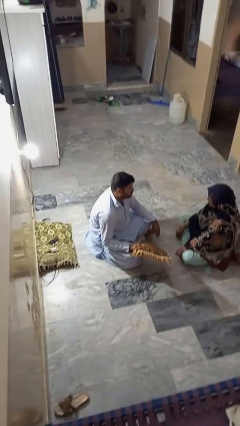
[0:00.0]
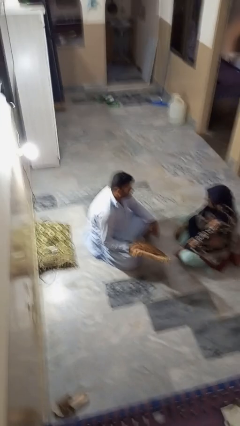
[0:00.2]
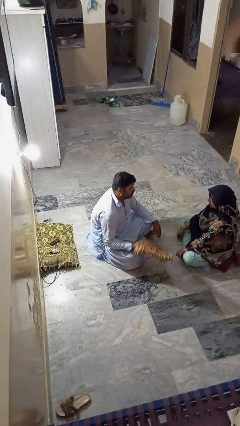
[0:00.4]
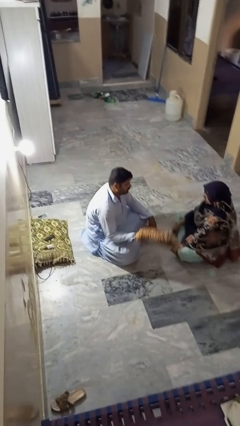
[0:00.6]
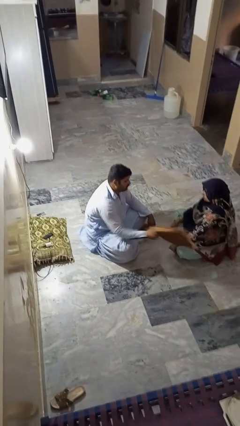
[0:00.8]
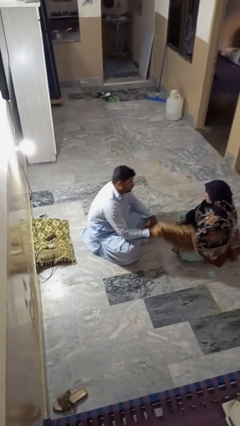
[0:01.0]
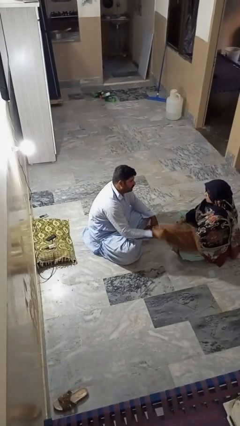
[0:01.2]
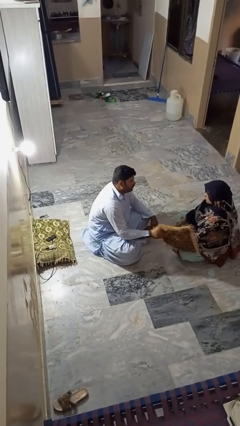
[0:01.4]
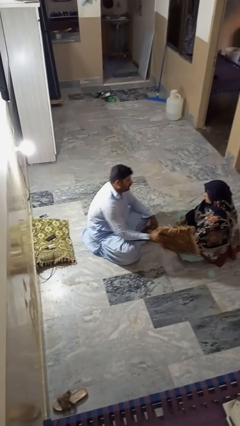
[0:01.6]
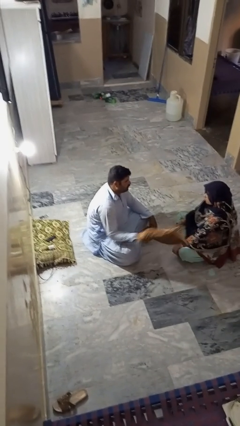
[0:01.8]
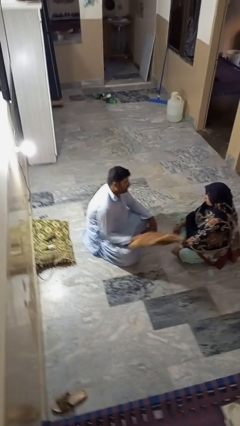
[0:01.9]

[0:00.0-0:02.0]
person hits person with pillow

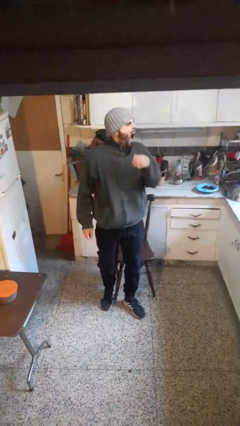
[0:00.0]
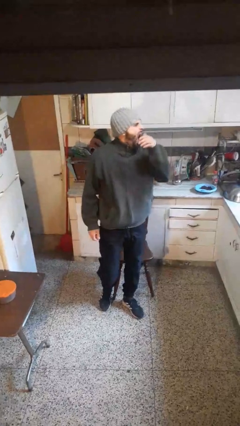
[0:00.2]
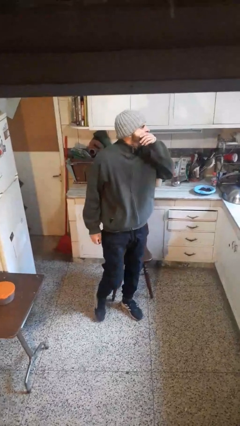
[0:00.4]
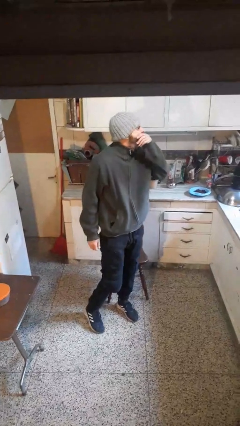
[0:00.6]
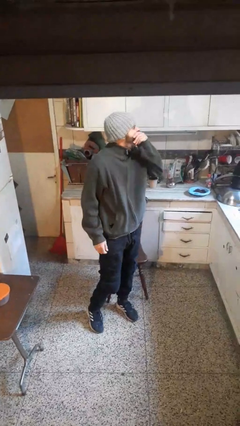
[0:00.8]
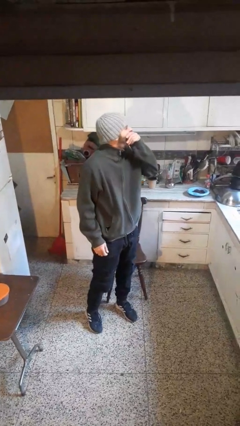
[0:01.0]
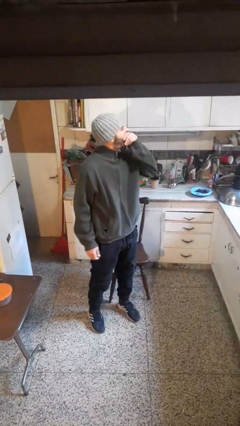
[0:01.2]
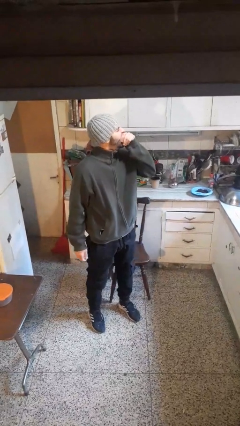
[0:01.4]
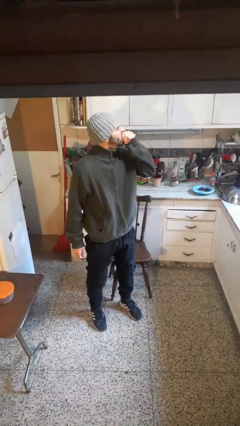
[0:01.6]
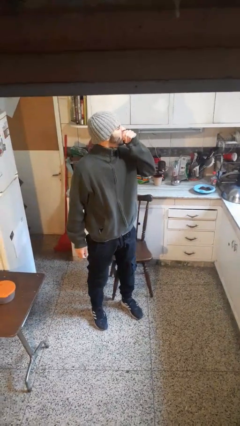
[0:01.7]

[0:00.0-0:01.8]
person yawns

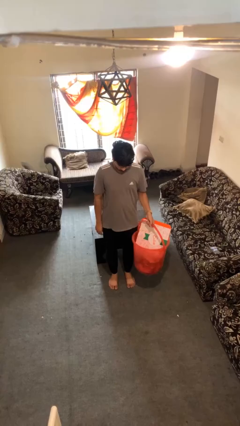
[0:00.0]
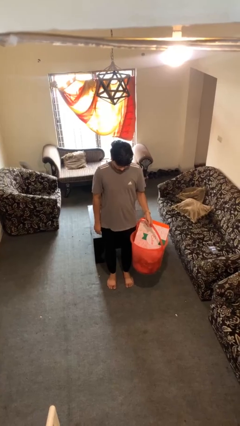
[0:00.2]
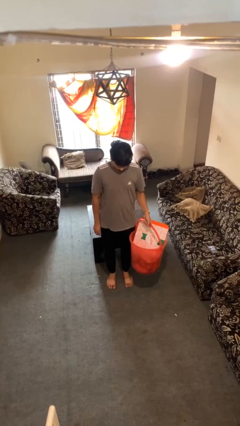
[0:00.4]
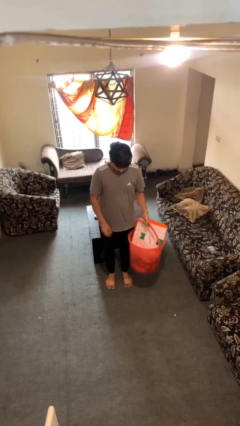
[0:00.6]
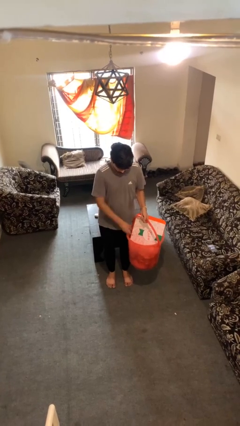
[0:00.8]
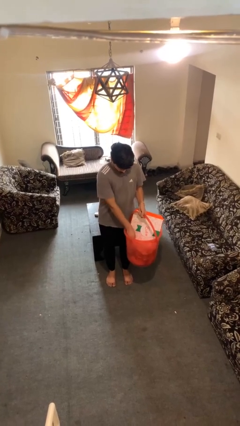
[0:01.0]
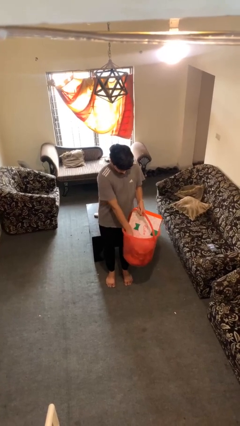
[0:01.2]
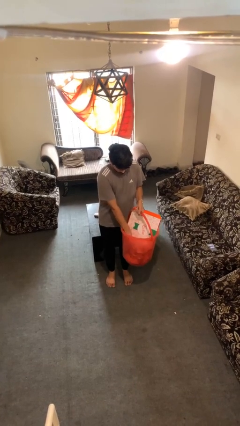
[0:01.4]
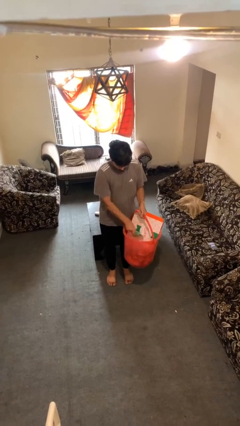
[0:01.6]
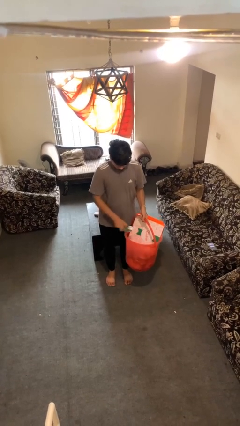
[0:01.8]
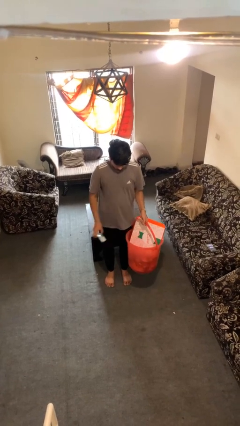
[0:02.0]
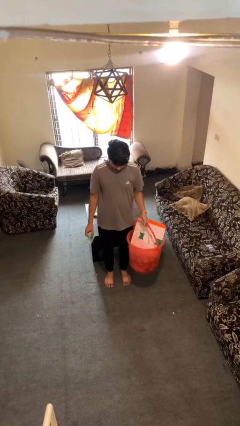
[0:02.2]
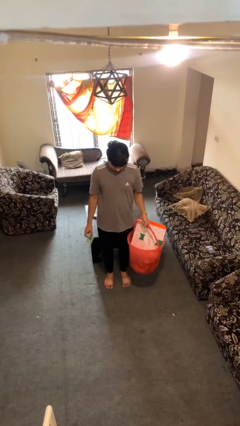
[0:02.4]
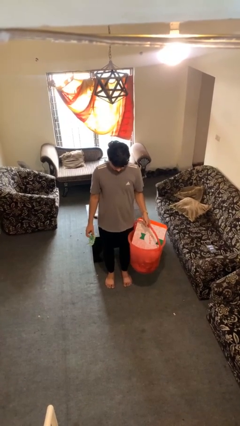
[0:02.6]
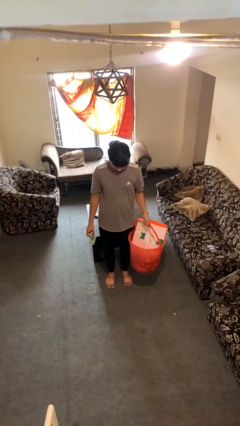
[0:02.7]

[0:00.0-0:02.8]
person takes object from basket

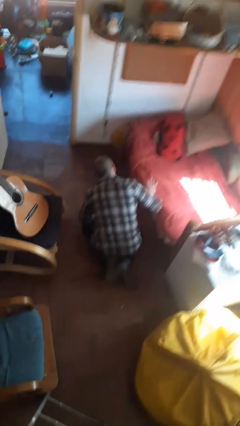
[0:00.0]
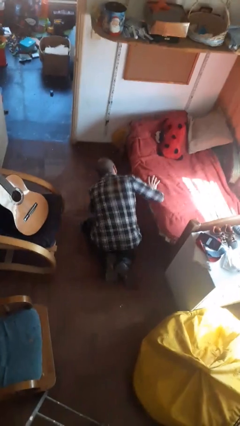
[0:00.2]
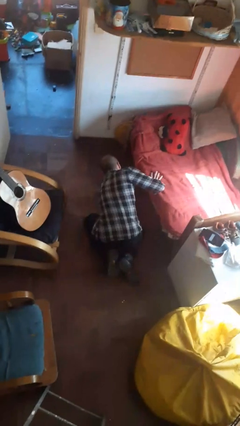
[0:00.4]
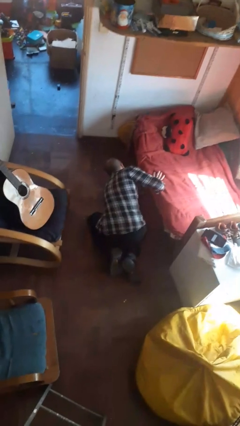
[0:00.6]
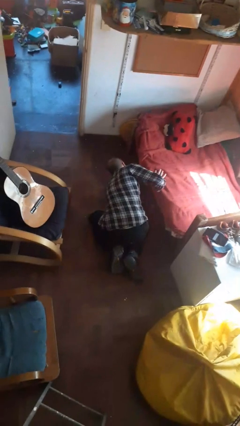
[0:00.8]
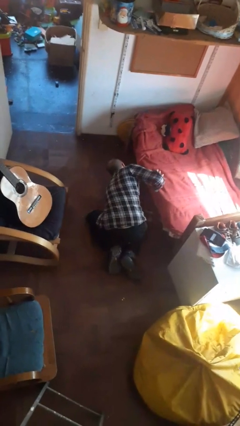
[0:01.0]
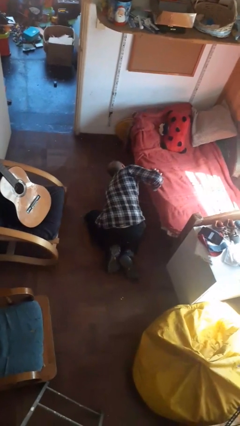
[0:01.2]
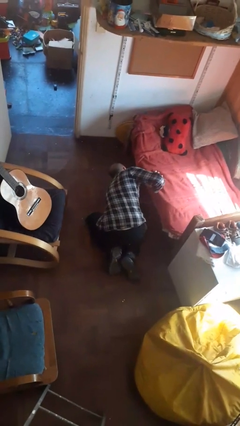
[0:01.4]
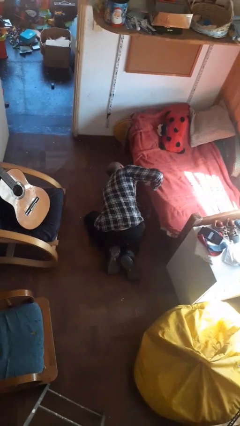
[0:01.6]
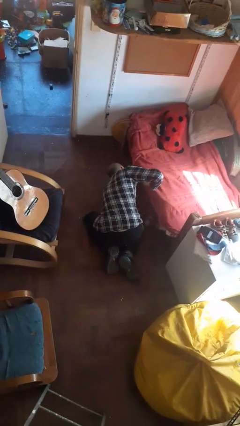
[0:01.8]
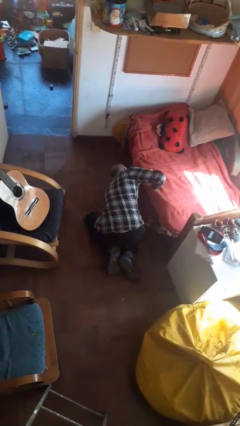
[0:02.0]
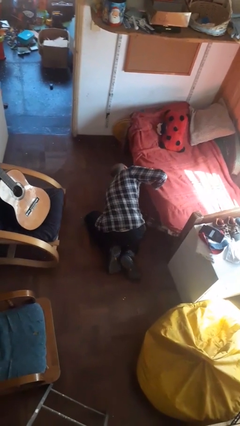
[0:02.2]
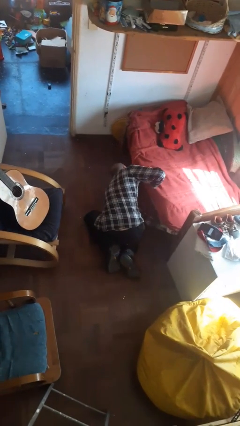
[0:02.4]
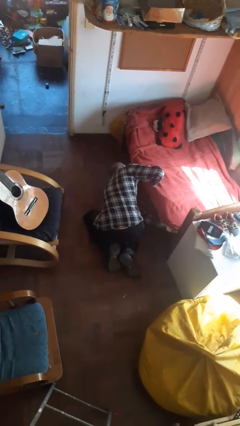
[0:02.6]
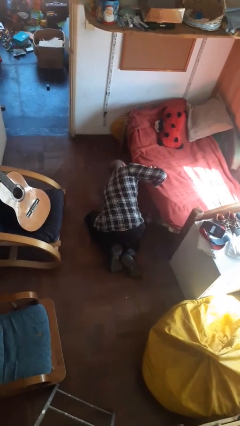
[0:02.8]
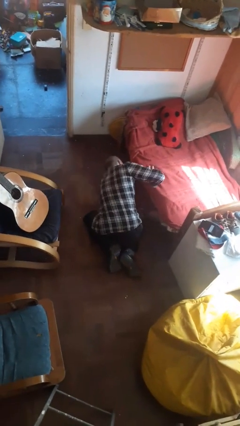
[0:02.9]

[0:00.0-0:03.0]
person searches under bed

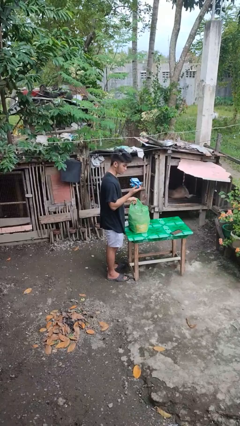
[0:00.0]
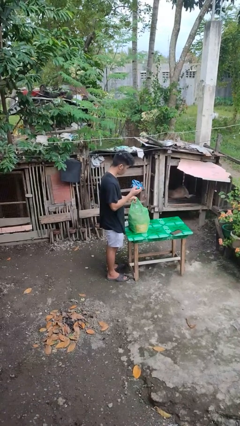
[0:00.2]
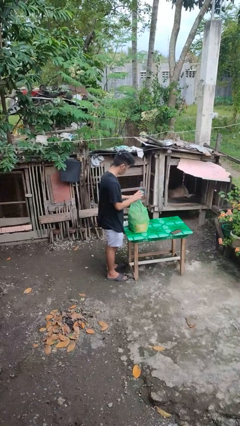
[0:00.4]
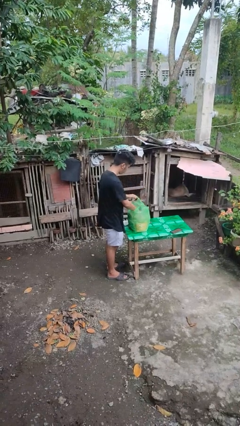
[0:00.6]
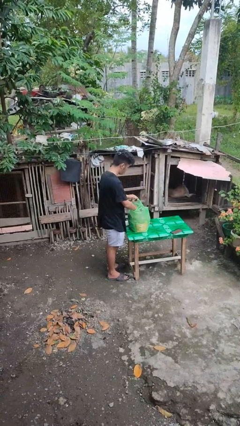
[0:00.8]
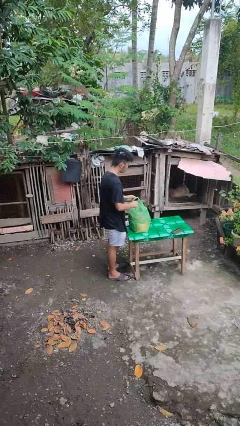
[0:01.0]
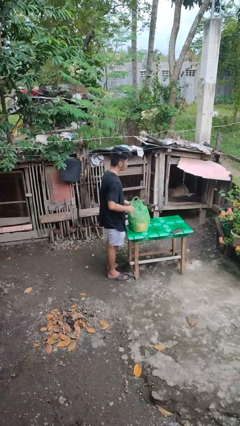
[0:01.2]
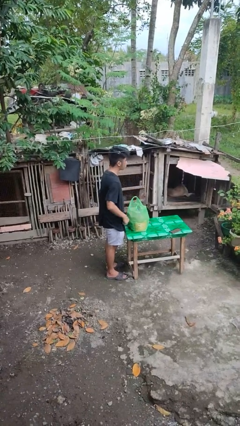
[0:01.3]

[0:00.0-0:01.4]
person puts object into bag

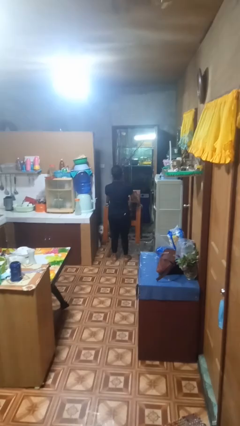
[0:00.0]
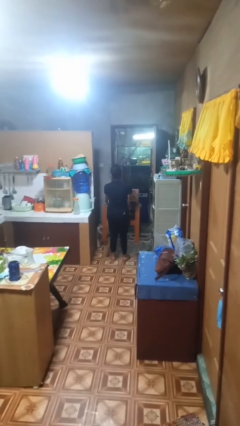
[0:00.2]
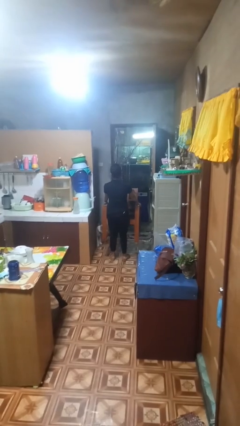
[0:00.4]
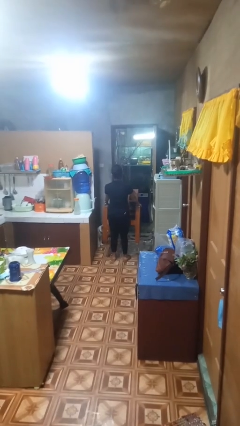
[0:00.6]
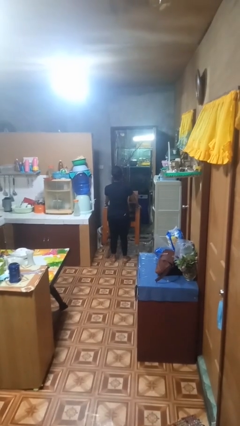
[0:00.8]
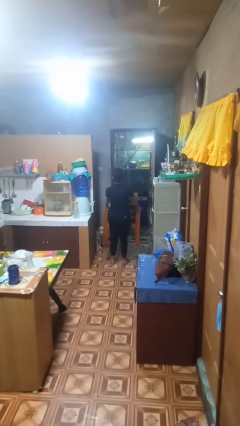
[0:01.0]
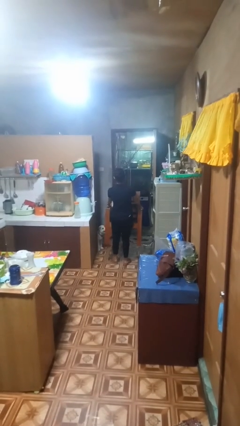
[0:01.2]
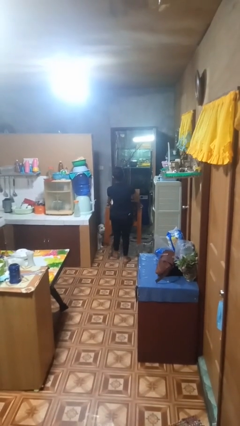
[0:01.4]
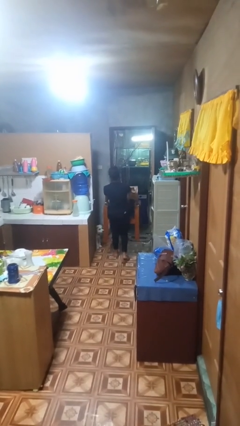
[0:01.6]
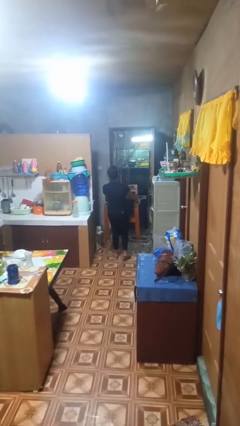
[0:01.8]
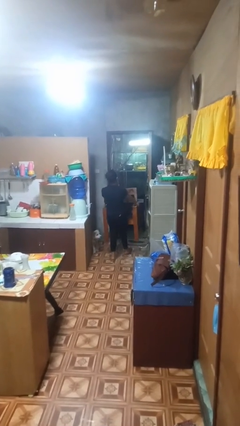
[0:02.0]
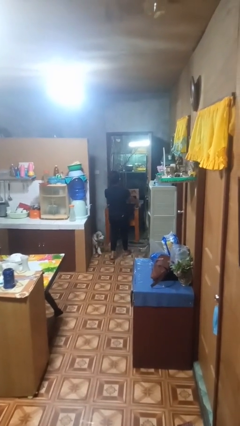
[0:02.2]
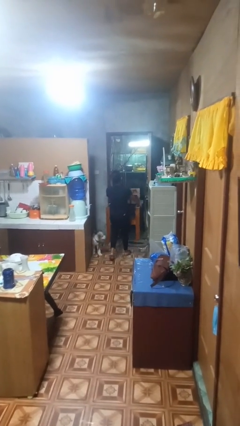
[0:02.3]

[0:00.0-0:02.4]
person carries furniture

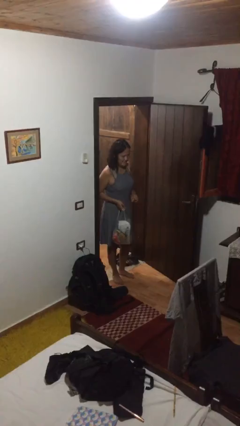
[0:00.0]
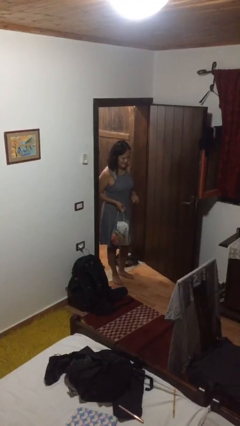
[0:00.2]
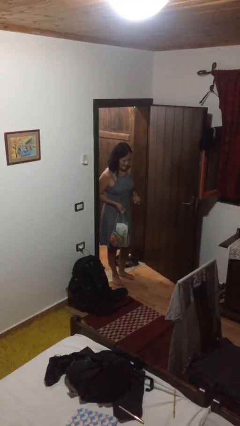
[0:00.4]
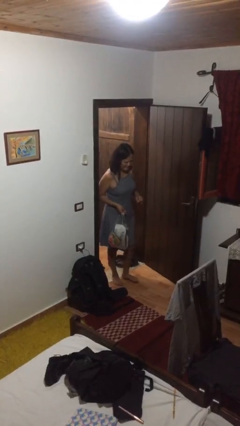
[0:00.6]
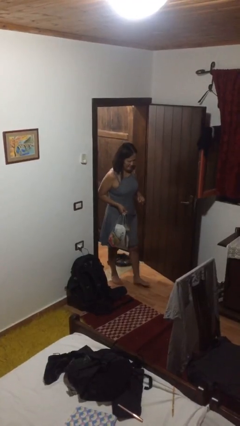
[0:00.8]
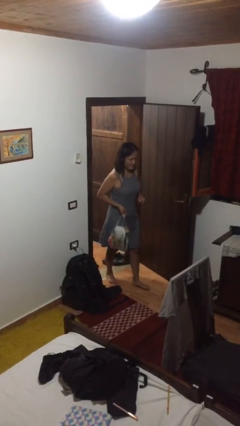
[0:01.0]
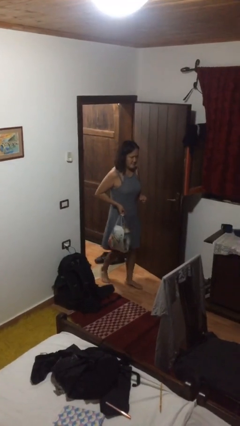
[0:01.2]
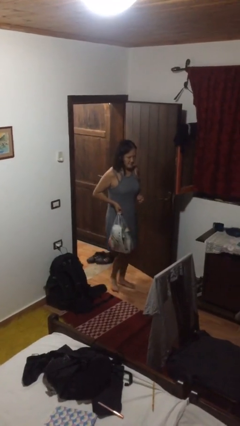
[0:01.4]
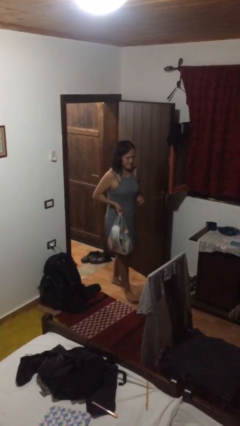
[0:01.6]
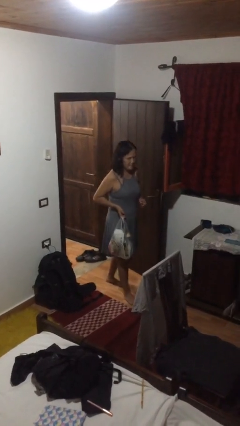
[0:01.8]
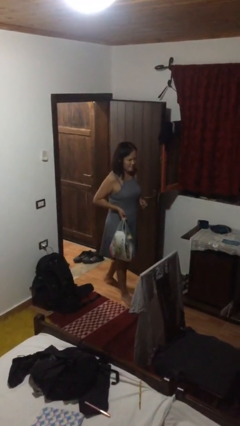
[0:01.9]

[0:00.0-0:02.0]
person carries groceries

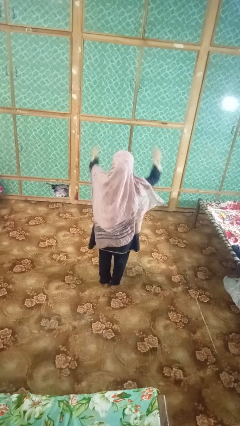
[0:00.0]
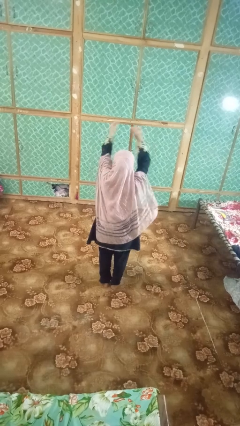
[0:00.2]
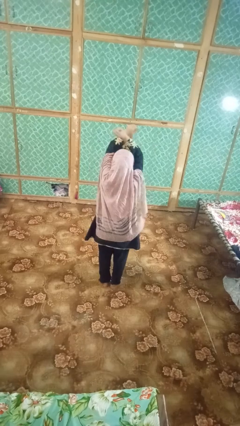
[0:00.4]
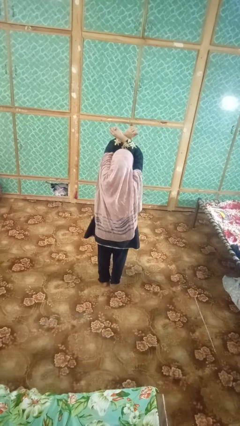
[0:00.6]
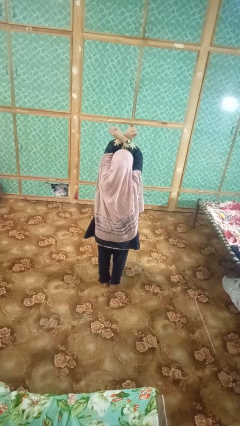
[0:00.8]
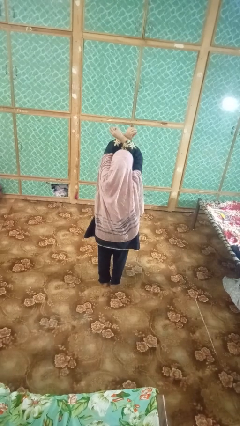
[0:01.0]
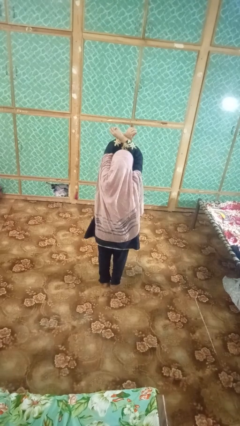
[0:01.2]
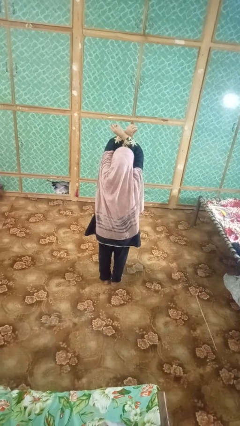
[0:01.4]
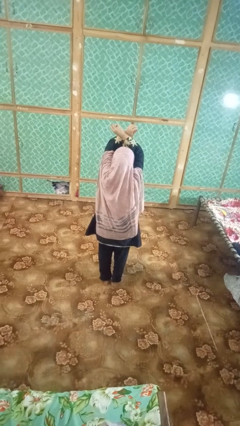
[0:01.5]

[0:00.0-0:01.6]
person gestures arms x

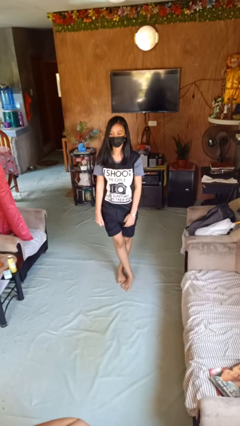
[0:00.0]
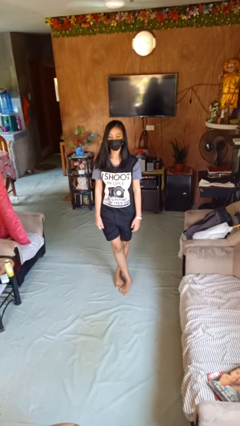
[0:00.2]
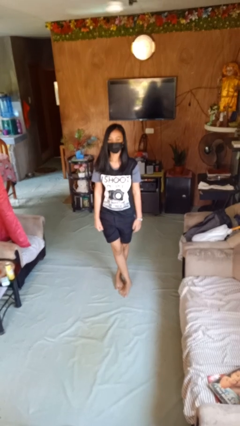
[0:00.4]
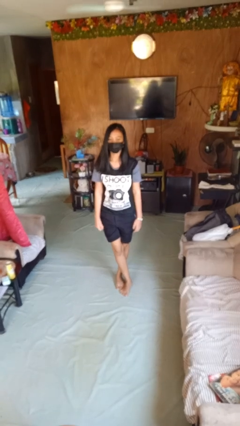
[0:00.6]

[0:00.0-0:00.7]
person stands up from floor
